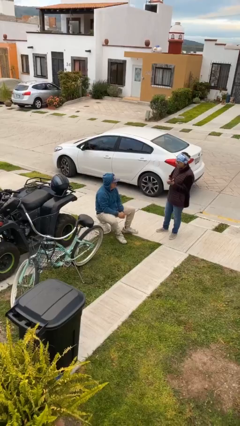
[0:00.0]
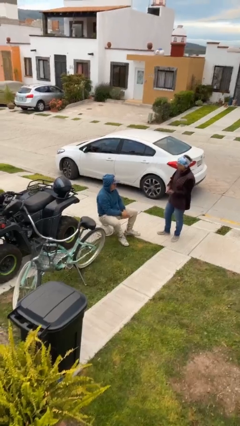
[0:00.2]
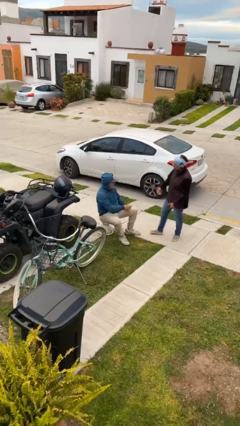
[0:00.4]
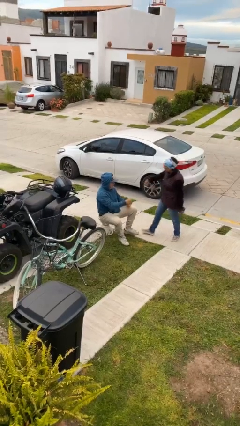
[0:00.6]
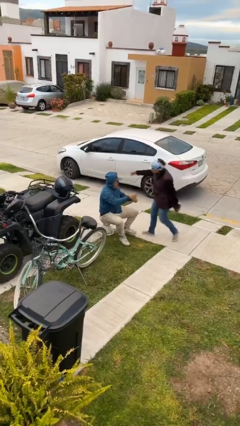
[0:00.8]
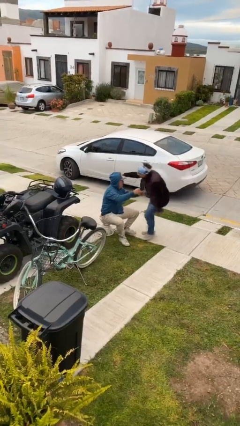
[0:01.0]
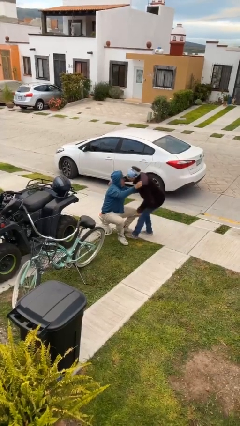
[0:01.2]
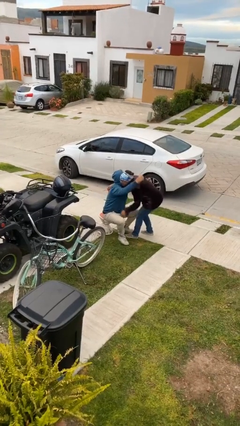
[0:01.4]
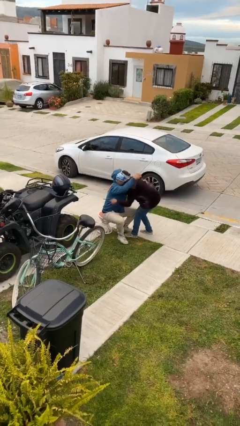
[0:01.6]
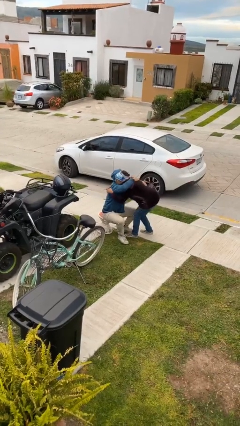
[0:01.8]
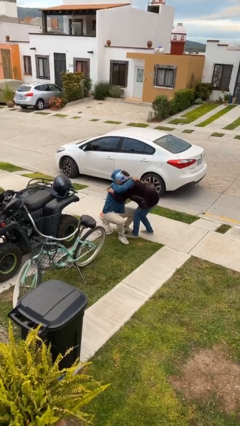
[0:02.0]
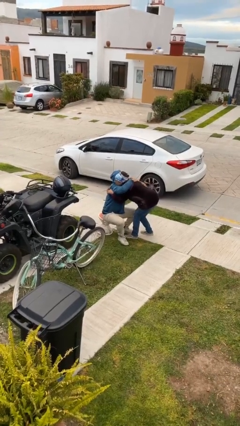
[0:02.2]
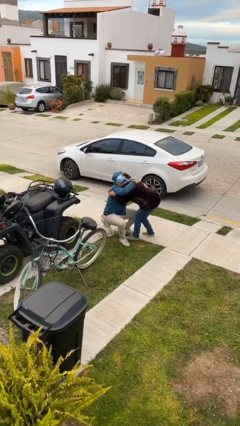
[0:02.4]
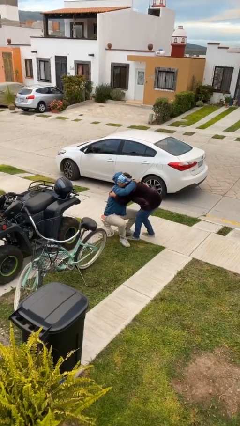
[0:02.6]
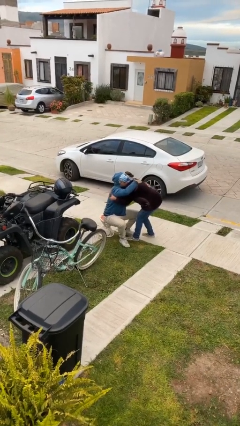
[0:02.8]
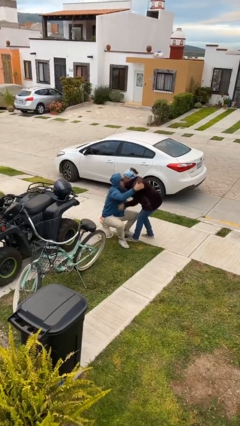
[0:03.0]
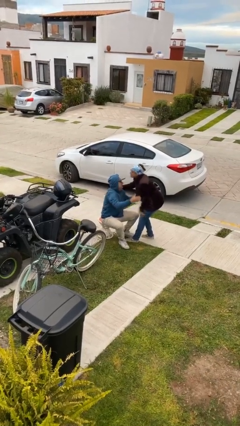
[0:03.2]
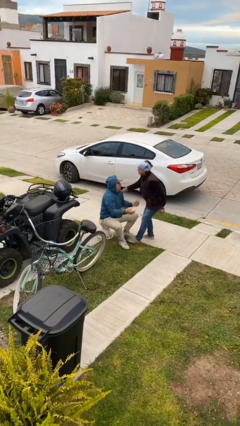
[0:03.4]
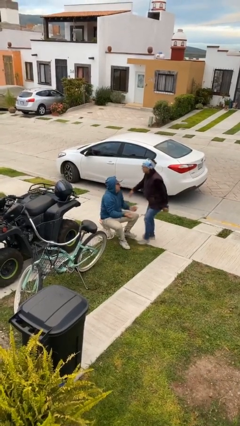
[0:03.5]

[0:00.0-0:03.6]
person embraces person

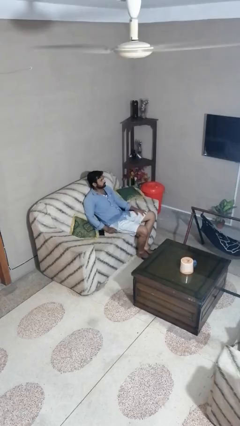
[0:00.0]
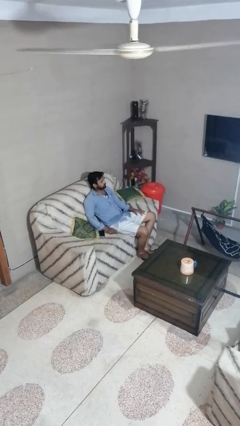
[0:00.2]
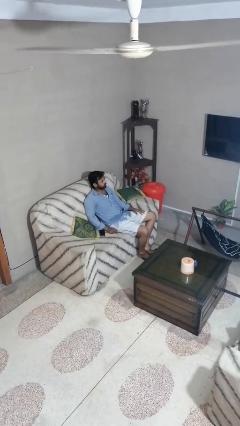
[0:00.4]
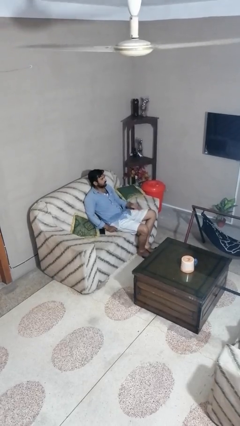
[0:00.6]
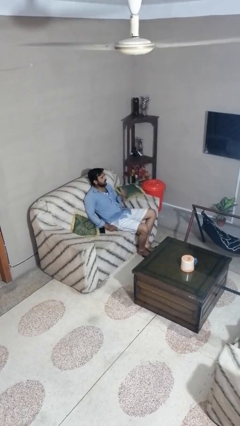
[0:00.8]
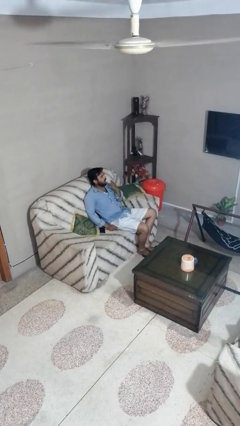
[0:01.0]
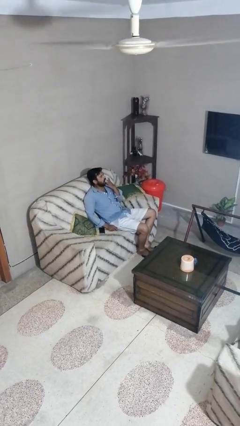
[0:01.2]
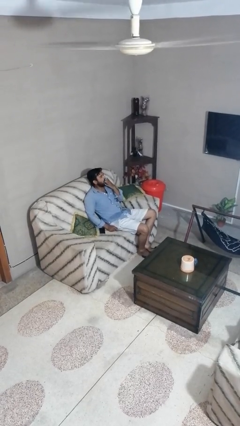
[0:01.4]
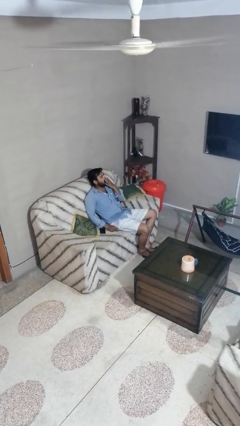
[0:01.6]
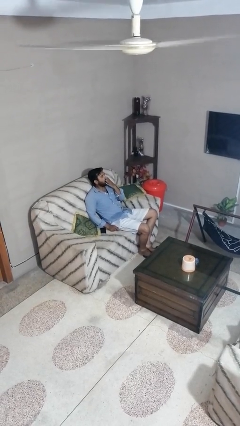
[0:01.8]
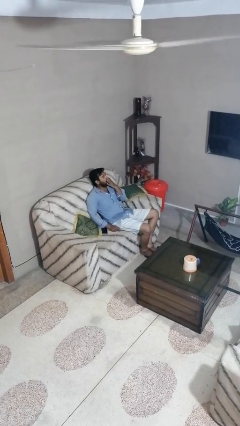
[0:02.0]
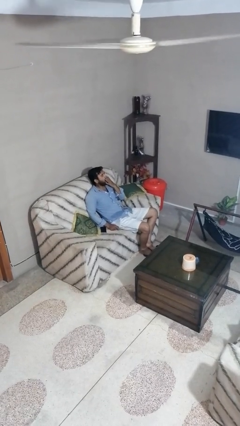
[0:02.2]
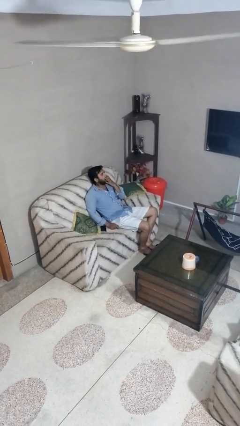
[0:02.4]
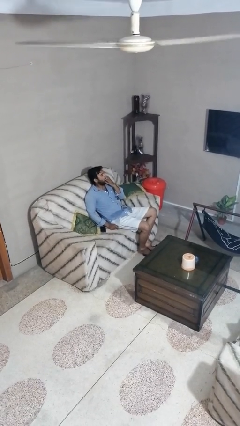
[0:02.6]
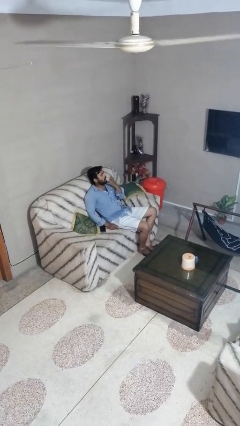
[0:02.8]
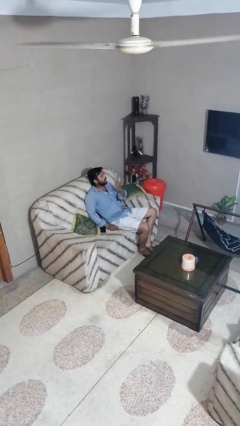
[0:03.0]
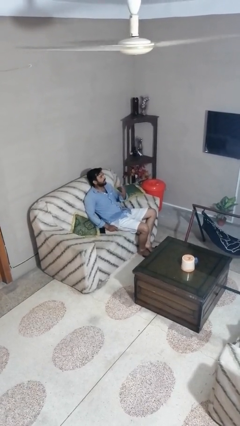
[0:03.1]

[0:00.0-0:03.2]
person yawns

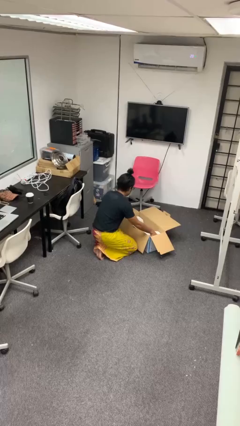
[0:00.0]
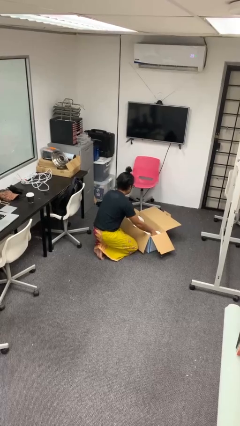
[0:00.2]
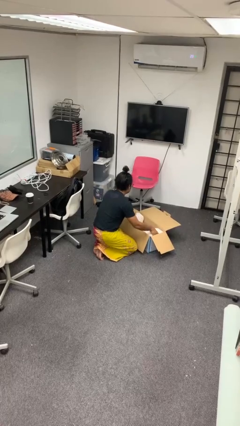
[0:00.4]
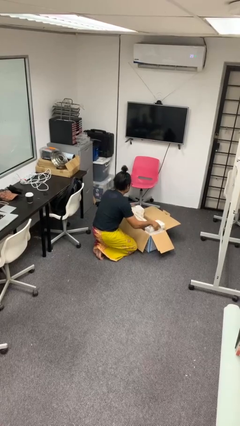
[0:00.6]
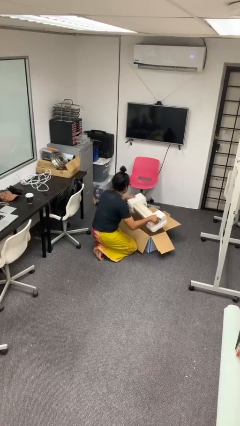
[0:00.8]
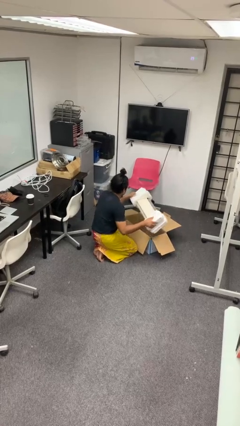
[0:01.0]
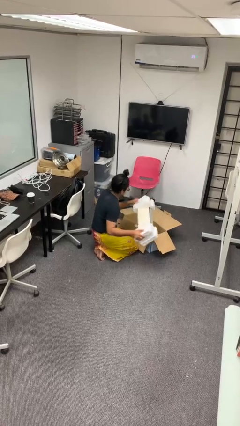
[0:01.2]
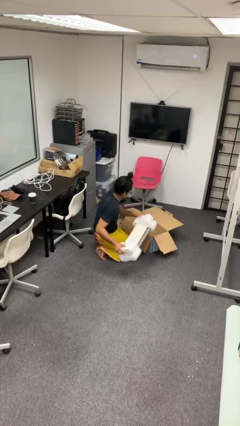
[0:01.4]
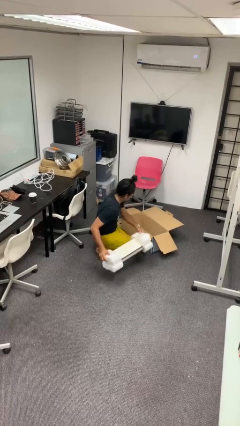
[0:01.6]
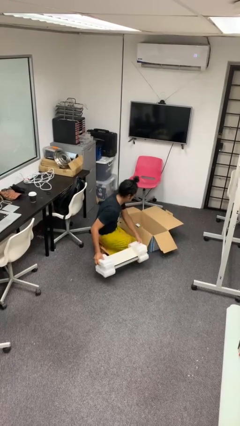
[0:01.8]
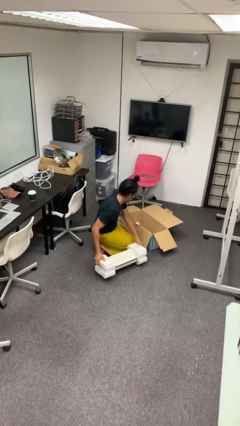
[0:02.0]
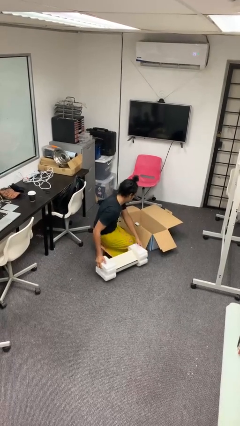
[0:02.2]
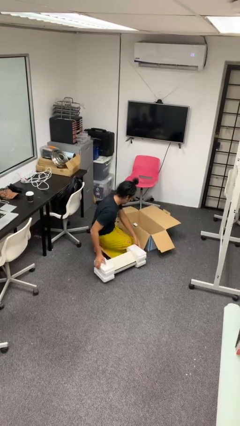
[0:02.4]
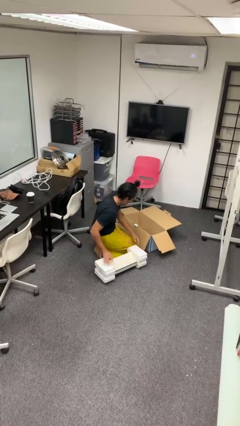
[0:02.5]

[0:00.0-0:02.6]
person takes object from box

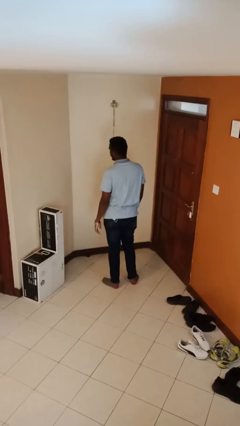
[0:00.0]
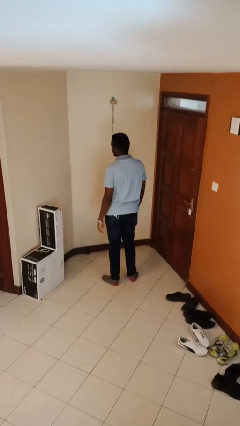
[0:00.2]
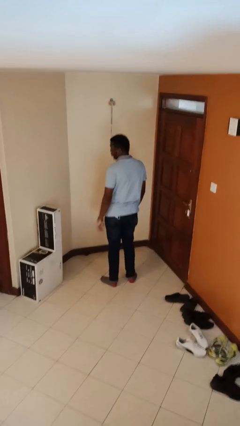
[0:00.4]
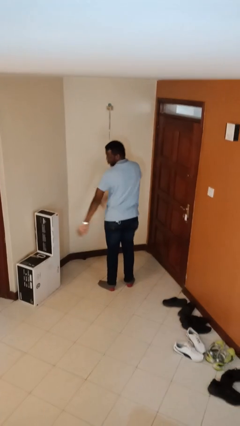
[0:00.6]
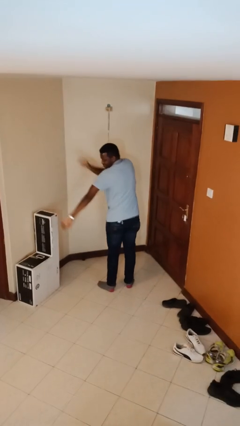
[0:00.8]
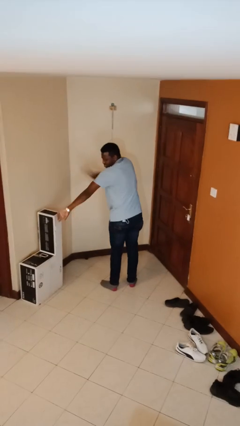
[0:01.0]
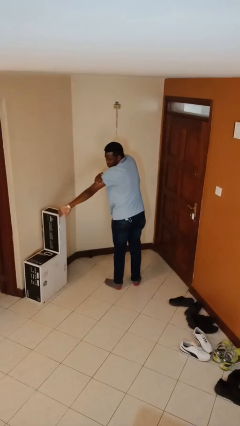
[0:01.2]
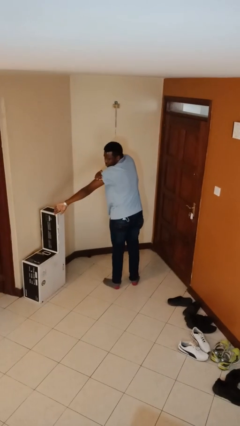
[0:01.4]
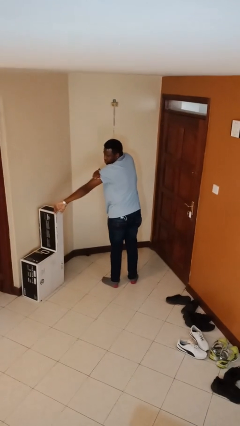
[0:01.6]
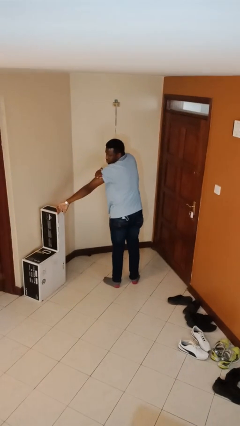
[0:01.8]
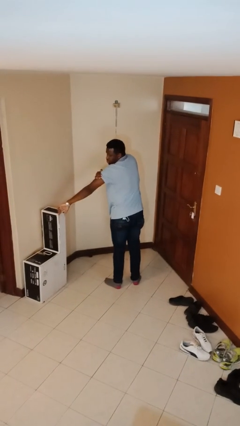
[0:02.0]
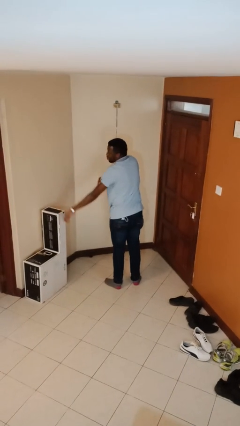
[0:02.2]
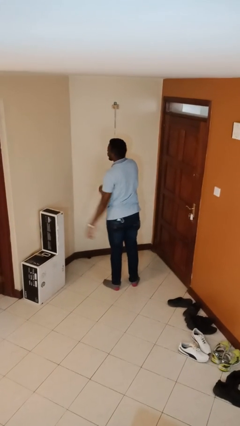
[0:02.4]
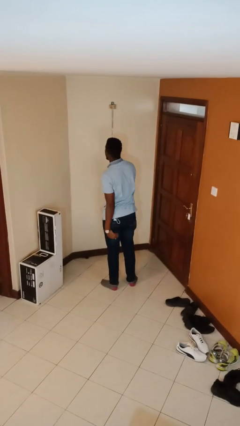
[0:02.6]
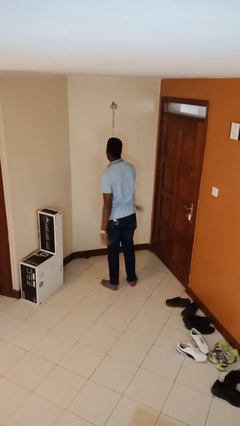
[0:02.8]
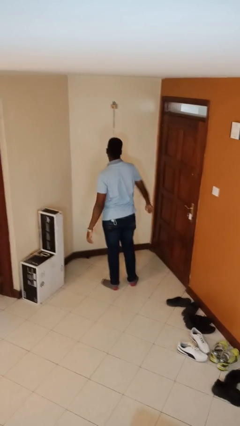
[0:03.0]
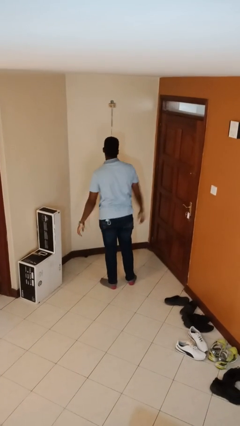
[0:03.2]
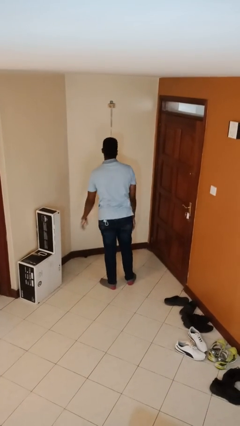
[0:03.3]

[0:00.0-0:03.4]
person swats bug

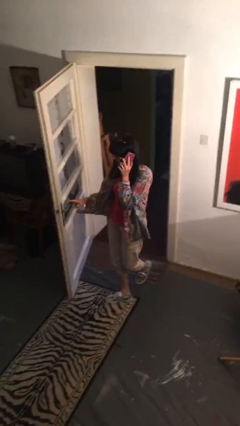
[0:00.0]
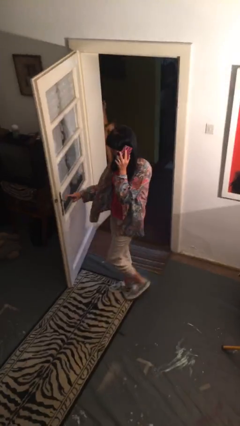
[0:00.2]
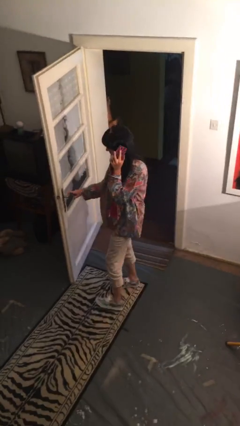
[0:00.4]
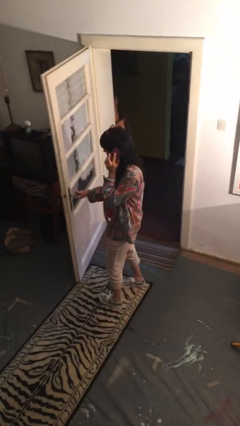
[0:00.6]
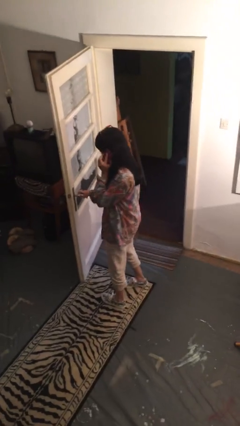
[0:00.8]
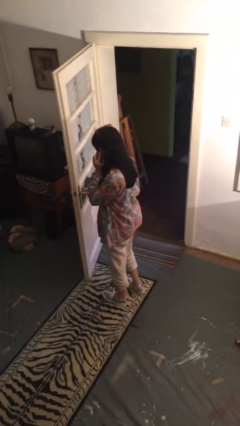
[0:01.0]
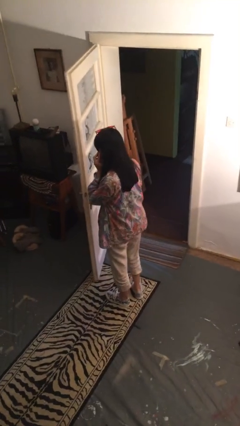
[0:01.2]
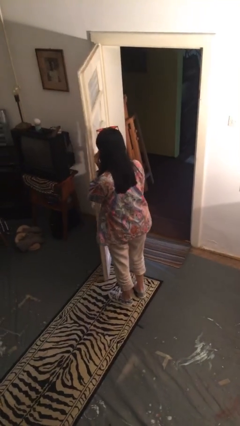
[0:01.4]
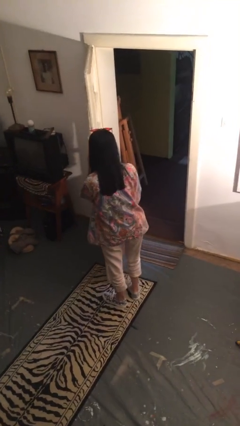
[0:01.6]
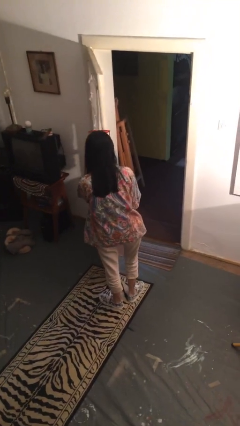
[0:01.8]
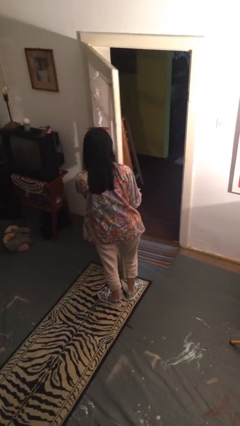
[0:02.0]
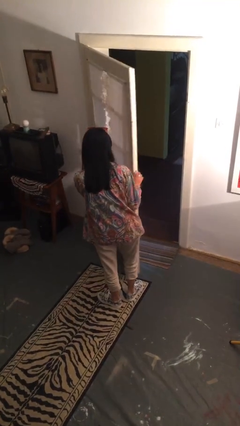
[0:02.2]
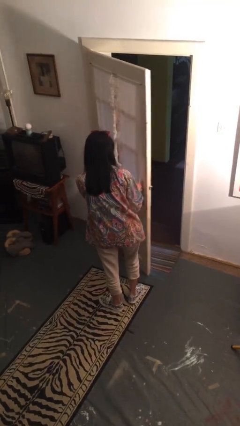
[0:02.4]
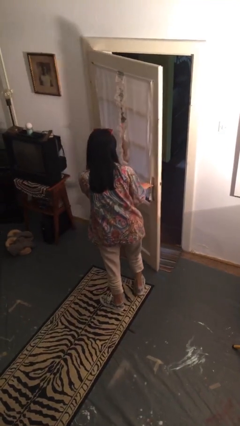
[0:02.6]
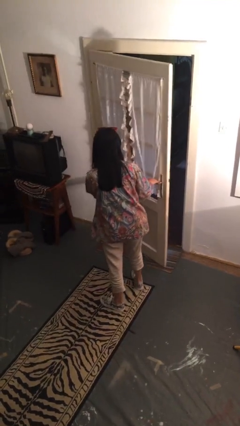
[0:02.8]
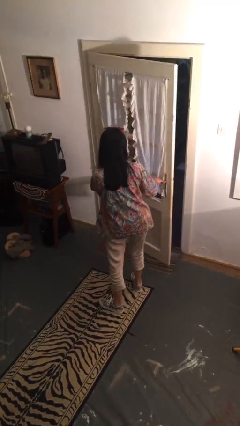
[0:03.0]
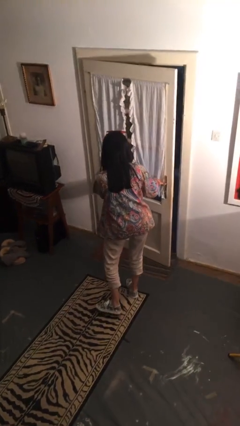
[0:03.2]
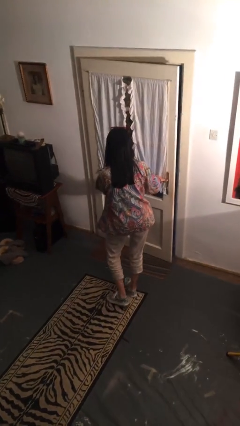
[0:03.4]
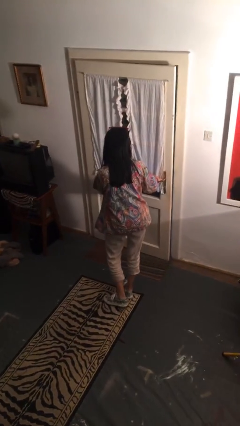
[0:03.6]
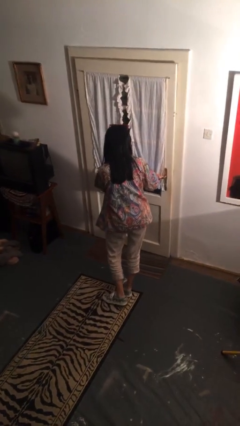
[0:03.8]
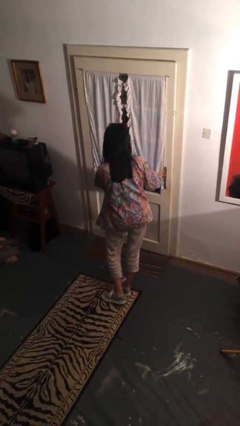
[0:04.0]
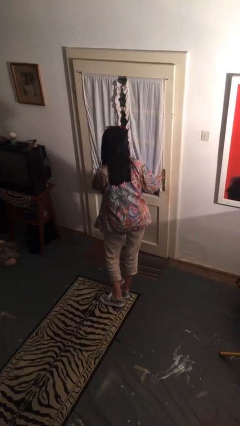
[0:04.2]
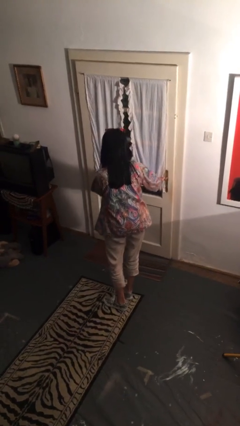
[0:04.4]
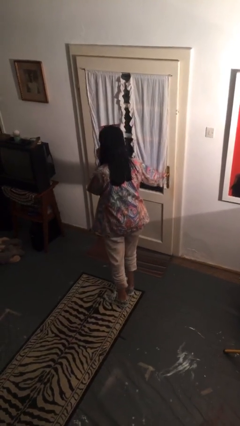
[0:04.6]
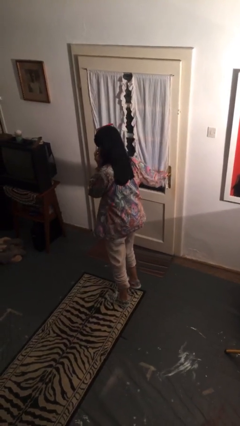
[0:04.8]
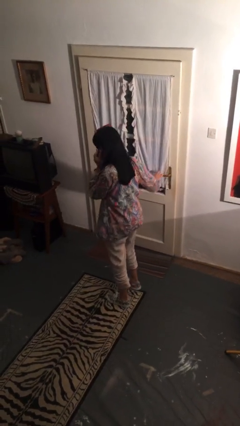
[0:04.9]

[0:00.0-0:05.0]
person closes facility door
